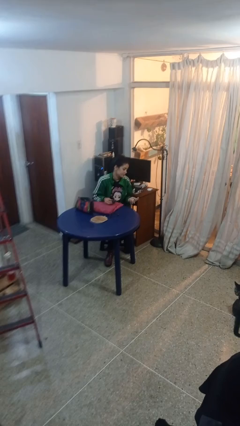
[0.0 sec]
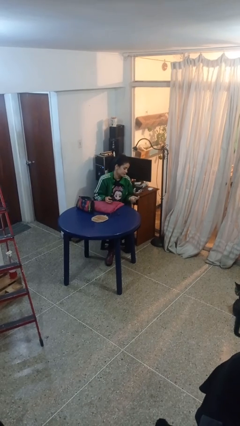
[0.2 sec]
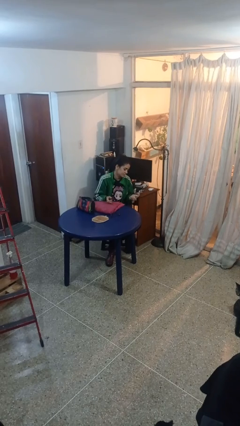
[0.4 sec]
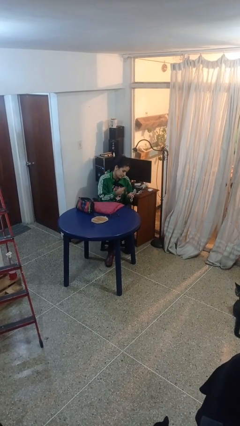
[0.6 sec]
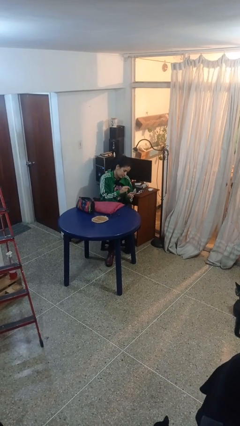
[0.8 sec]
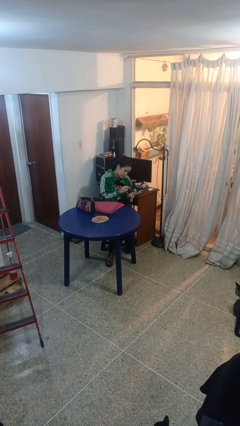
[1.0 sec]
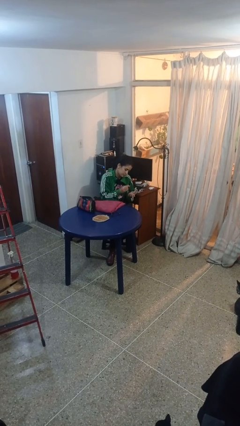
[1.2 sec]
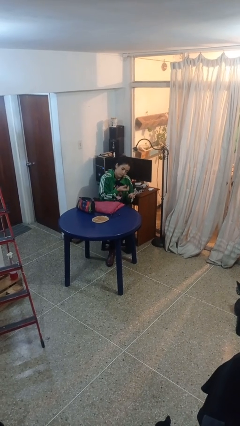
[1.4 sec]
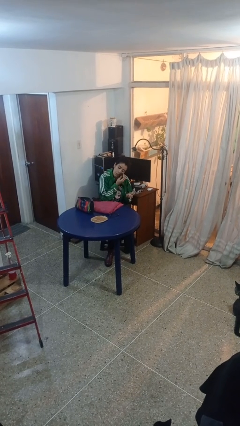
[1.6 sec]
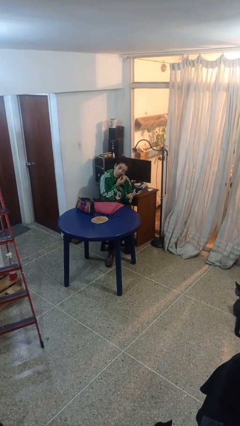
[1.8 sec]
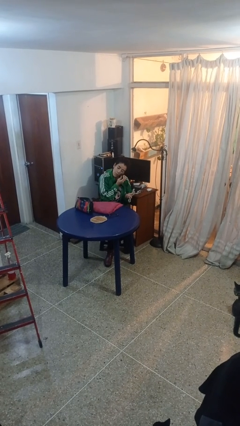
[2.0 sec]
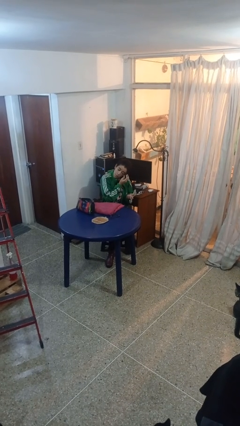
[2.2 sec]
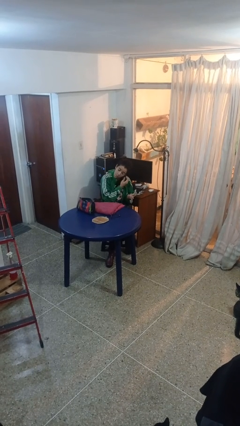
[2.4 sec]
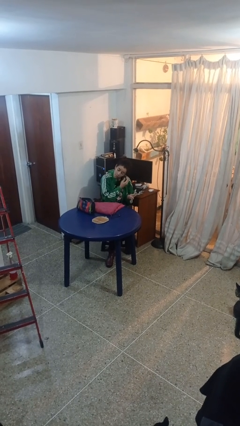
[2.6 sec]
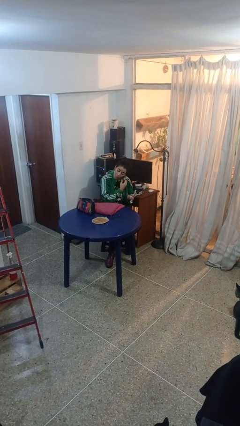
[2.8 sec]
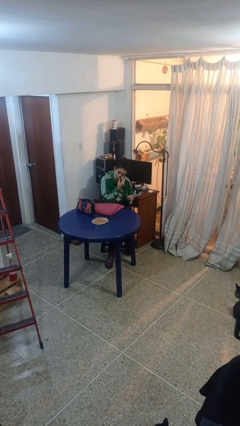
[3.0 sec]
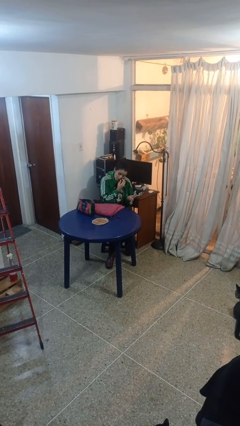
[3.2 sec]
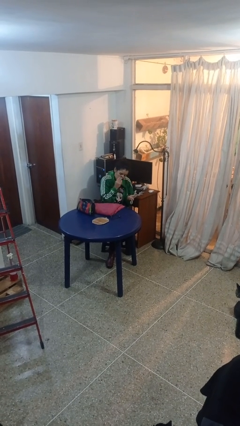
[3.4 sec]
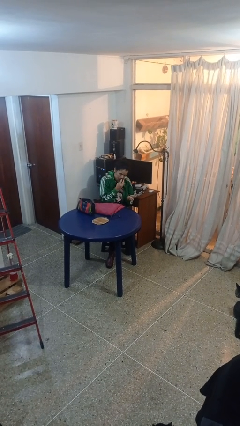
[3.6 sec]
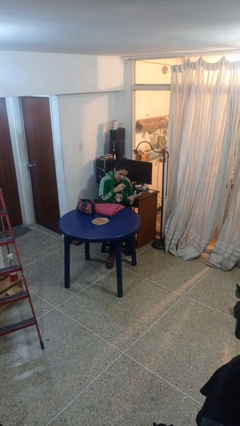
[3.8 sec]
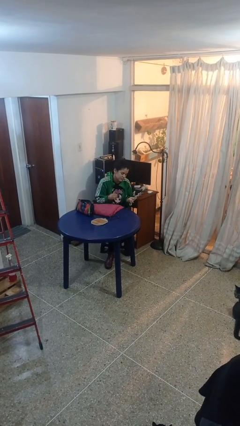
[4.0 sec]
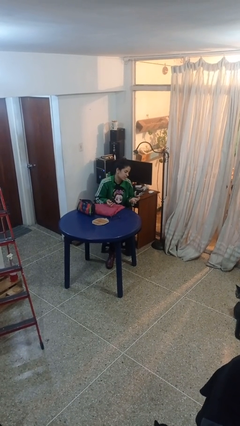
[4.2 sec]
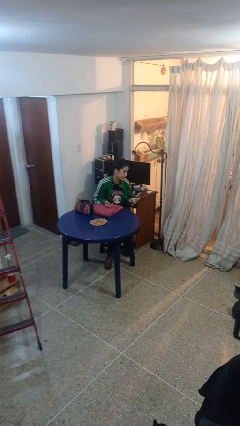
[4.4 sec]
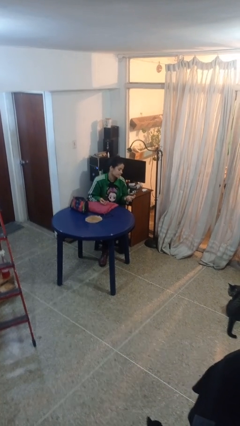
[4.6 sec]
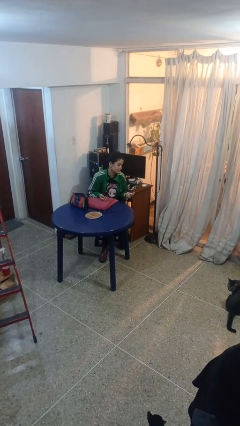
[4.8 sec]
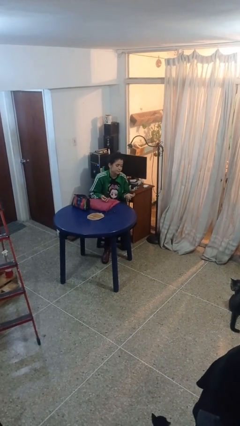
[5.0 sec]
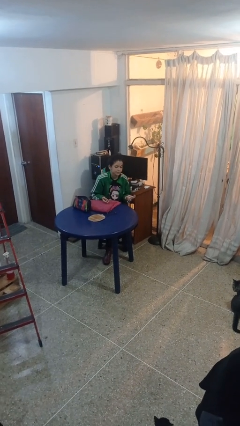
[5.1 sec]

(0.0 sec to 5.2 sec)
person applies foundation makeup

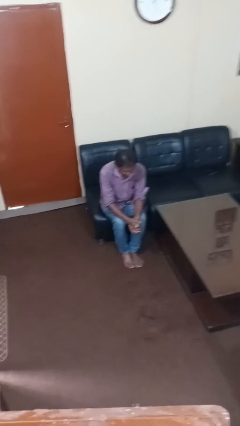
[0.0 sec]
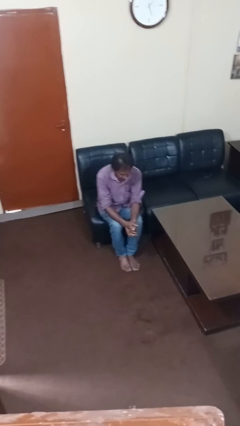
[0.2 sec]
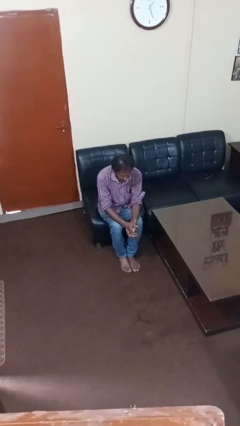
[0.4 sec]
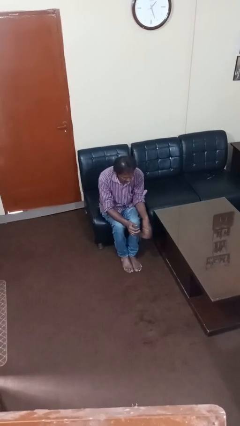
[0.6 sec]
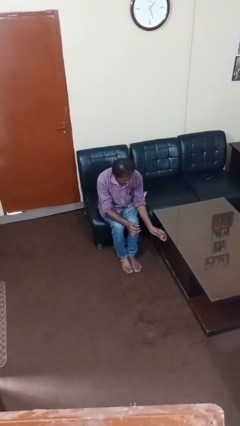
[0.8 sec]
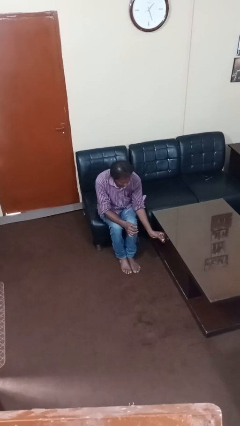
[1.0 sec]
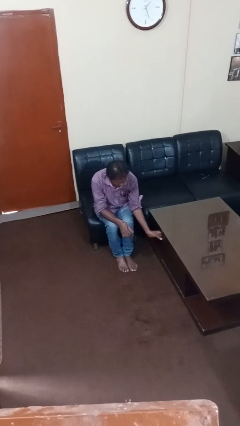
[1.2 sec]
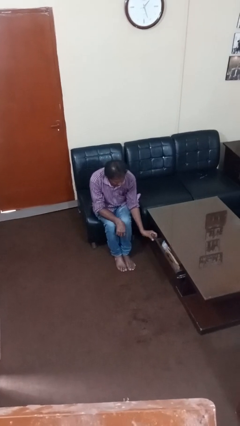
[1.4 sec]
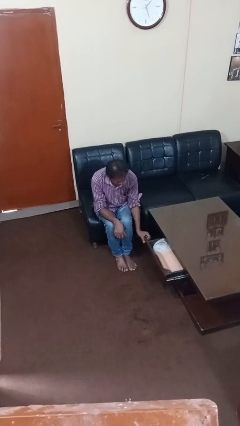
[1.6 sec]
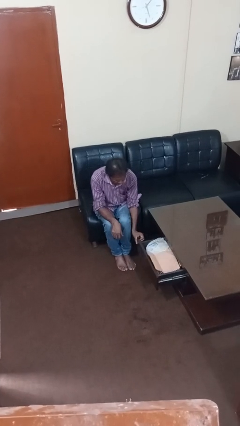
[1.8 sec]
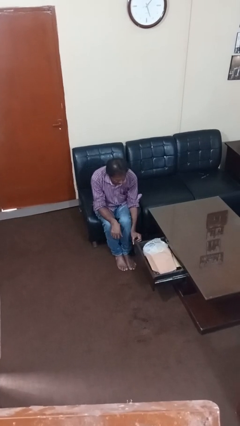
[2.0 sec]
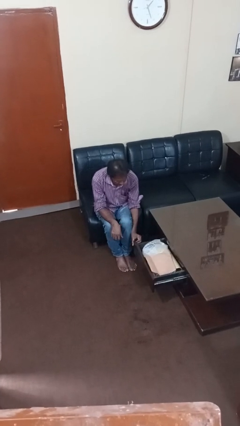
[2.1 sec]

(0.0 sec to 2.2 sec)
person opens dresser drawer

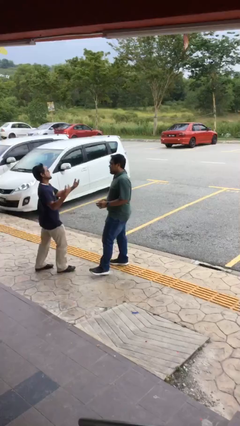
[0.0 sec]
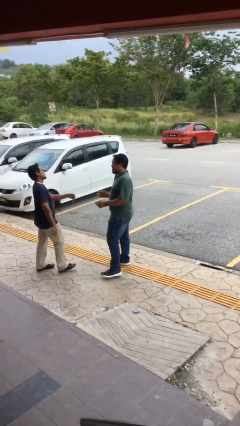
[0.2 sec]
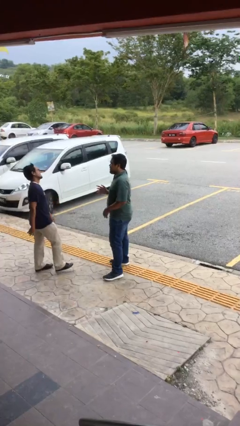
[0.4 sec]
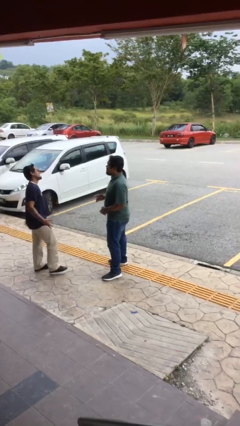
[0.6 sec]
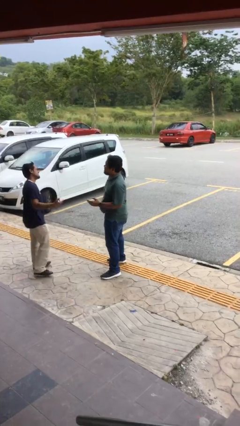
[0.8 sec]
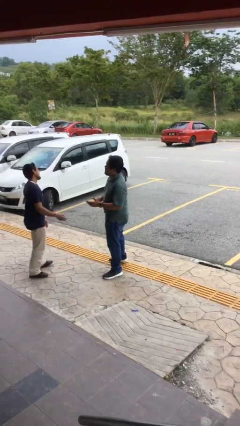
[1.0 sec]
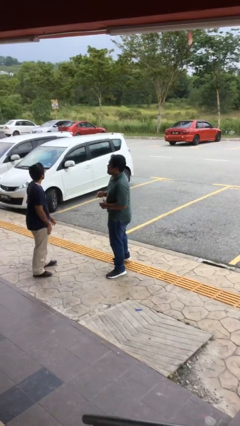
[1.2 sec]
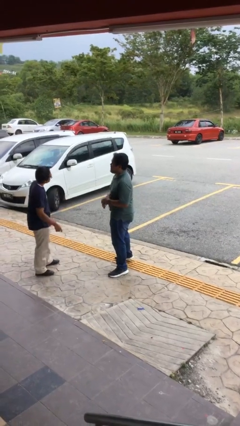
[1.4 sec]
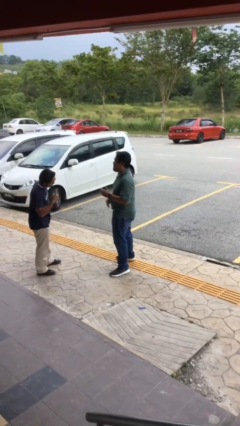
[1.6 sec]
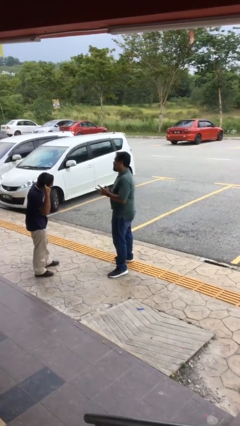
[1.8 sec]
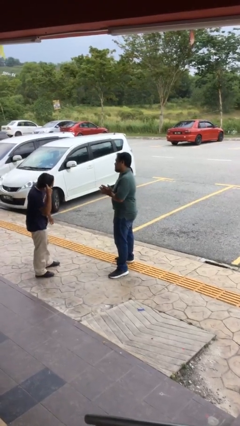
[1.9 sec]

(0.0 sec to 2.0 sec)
person talks to person

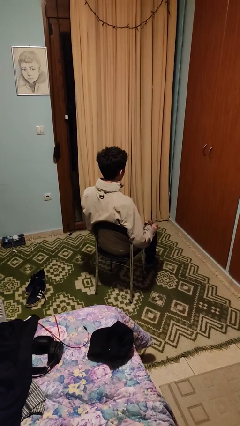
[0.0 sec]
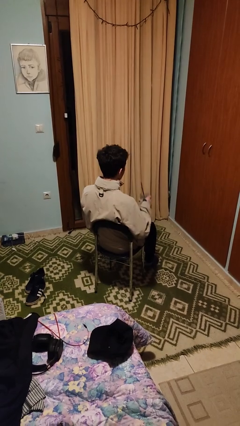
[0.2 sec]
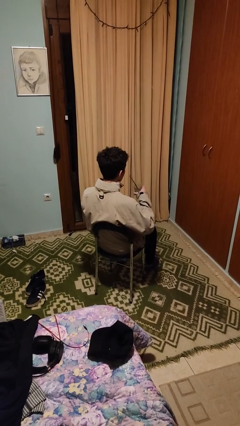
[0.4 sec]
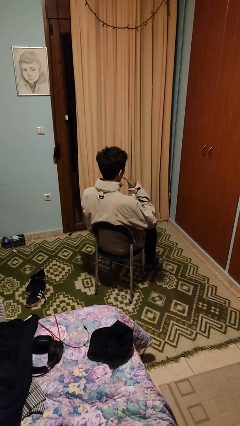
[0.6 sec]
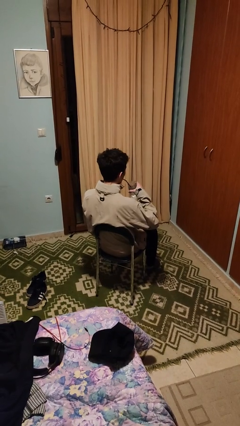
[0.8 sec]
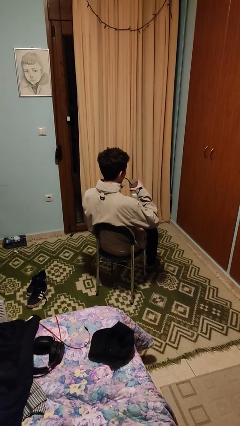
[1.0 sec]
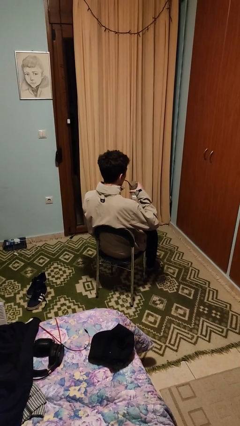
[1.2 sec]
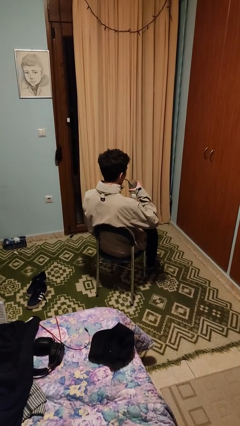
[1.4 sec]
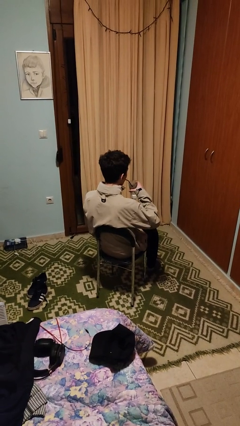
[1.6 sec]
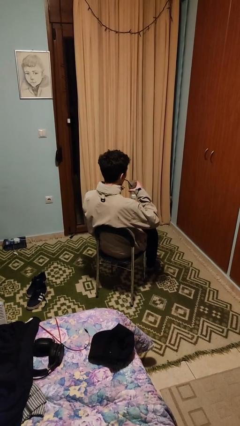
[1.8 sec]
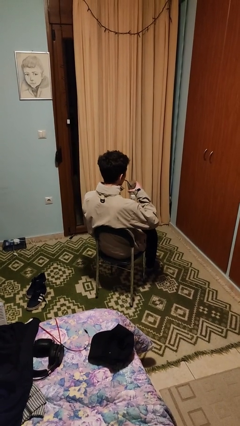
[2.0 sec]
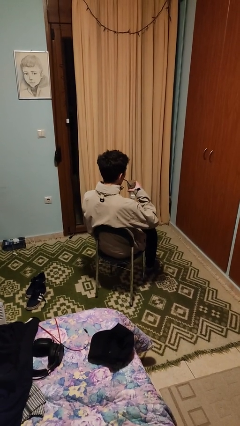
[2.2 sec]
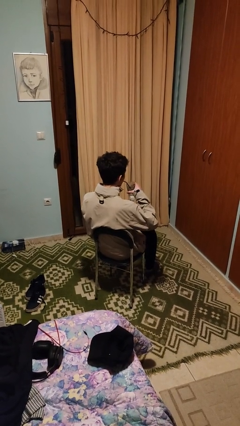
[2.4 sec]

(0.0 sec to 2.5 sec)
person drinks from straw

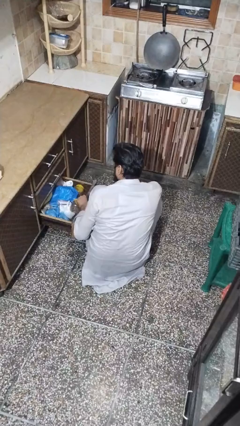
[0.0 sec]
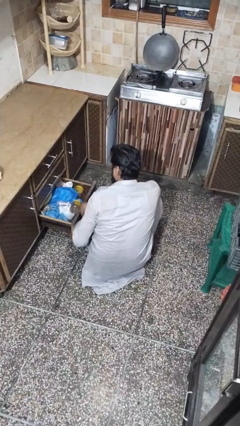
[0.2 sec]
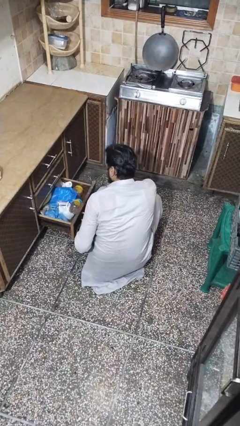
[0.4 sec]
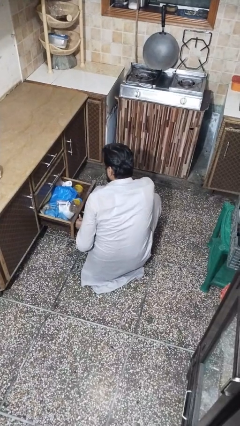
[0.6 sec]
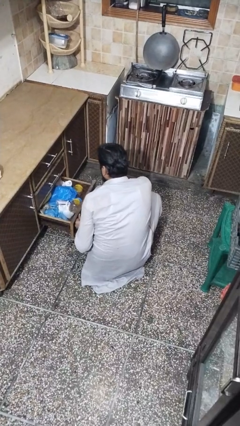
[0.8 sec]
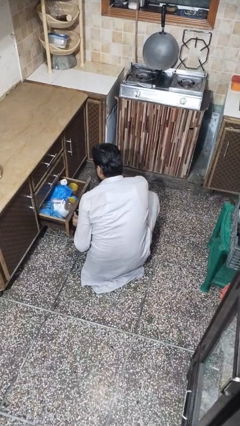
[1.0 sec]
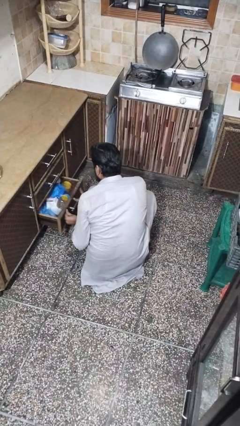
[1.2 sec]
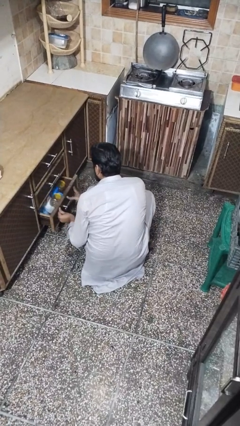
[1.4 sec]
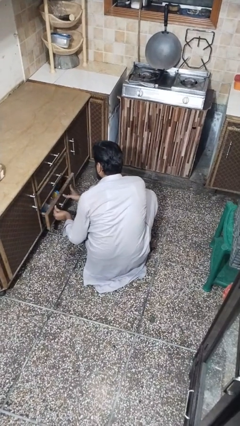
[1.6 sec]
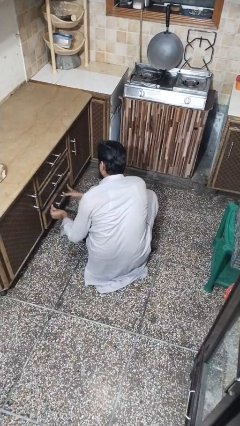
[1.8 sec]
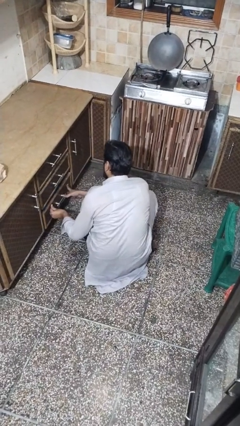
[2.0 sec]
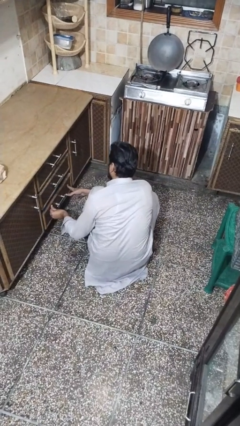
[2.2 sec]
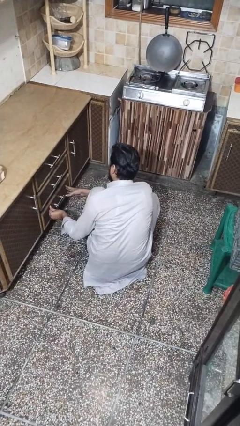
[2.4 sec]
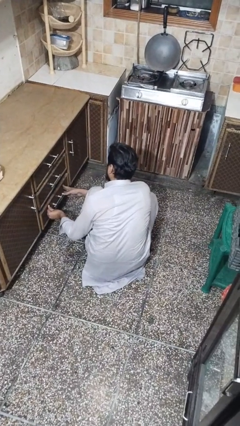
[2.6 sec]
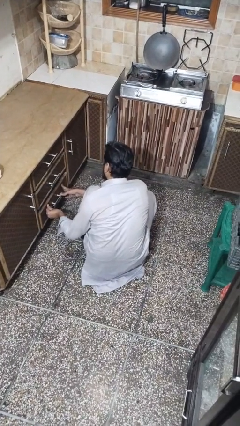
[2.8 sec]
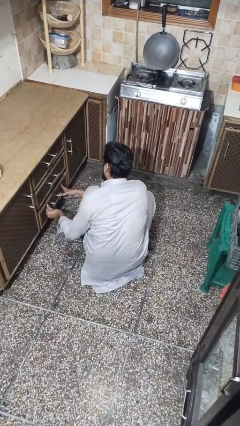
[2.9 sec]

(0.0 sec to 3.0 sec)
person closes kitchen drawer

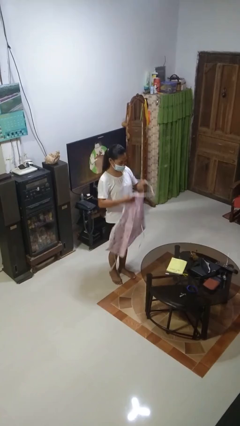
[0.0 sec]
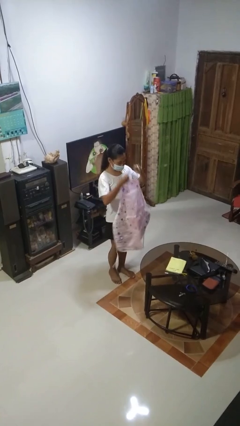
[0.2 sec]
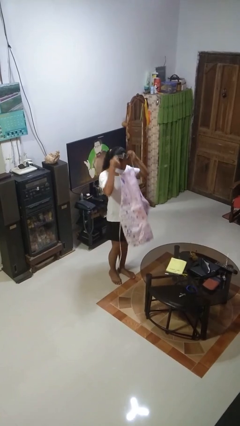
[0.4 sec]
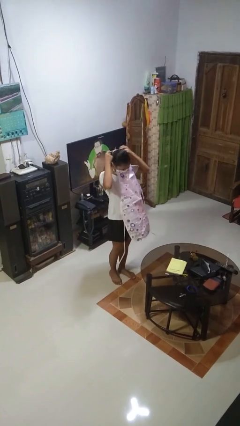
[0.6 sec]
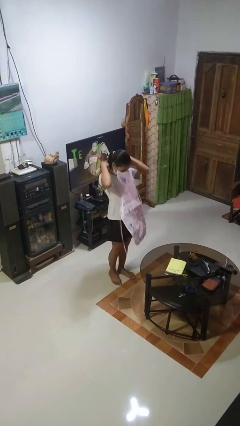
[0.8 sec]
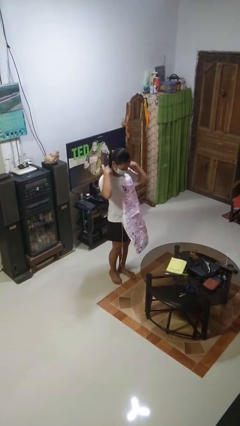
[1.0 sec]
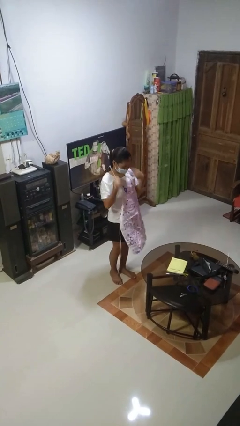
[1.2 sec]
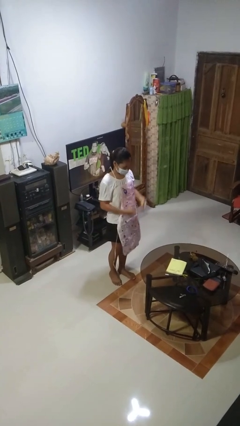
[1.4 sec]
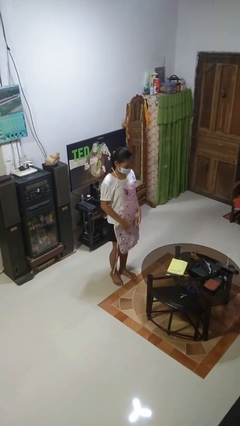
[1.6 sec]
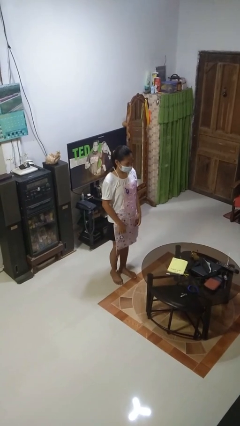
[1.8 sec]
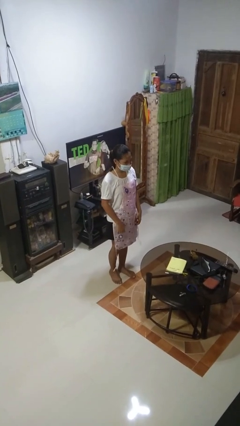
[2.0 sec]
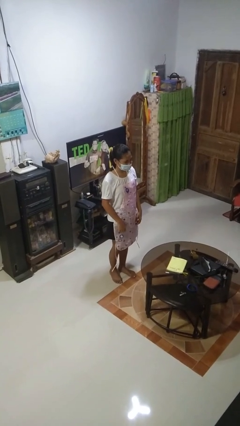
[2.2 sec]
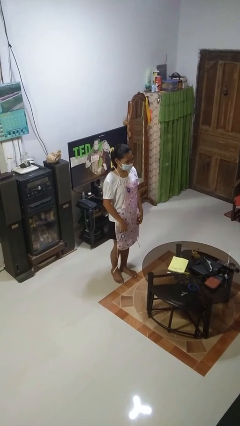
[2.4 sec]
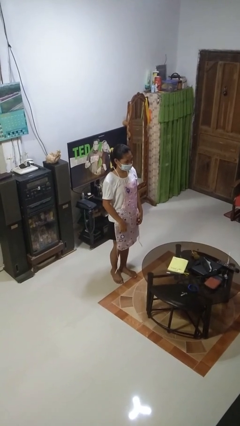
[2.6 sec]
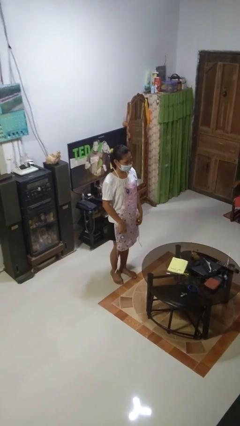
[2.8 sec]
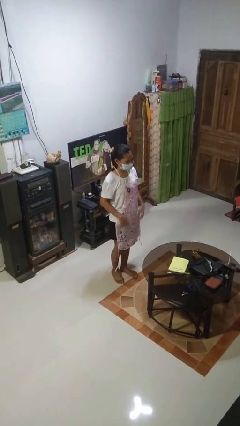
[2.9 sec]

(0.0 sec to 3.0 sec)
person puts on apron
